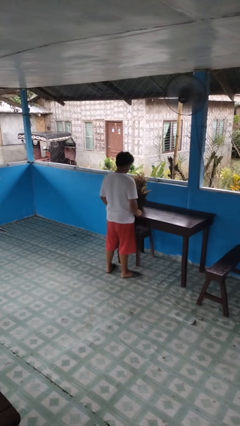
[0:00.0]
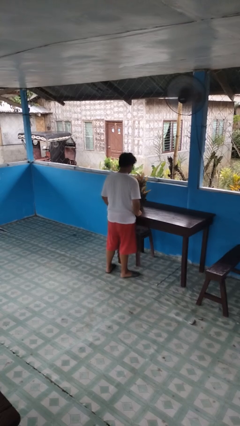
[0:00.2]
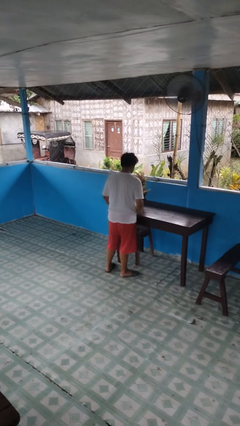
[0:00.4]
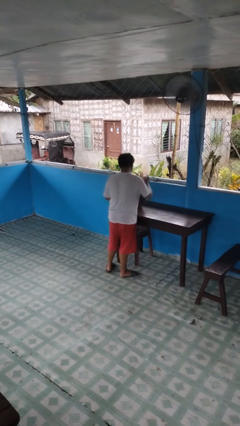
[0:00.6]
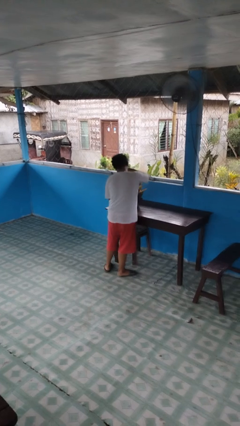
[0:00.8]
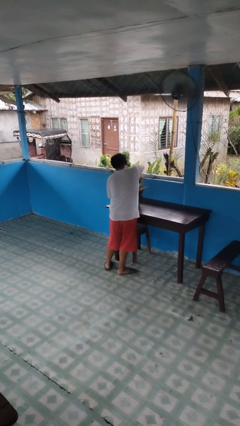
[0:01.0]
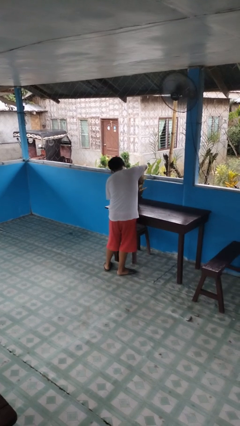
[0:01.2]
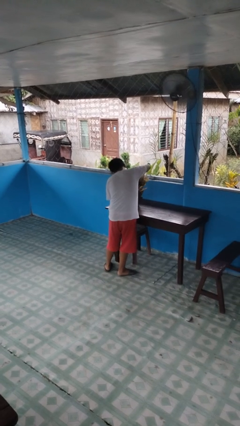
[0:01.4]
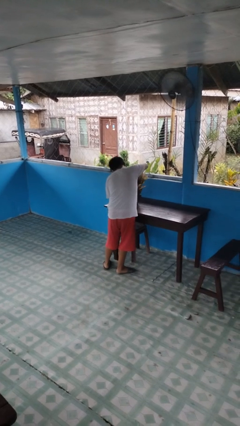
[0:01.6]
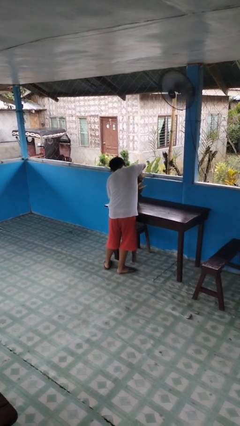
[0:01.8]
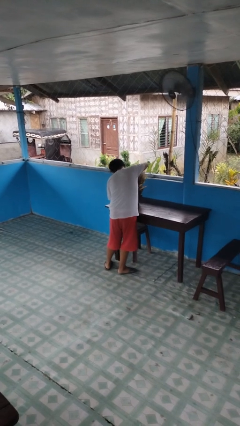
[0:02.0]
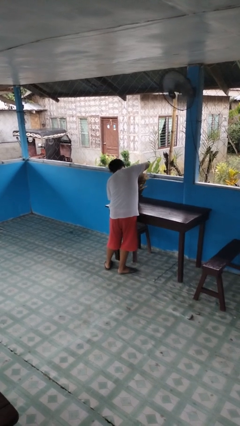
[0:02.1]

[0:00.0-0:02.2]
person arranges flowers in vase

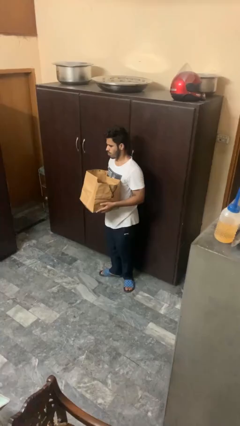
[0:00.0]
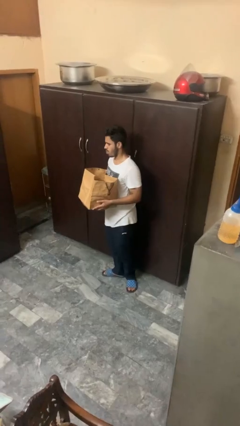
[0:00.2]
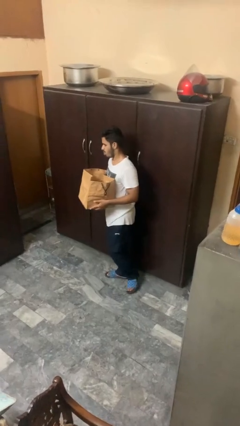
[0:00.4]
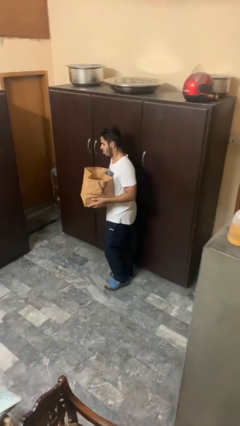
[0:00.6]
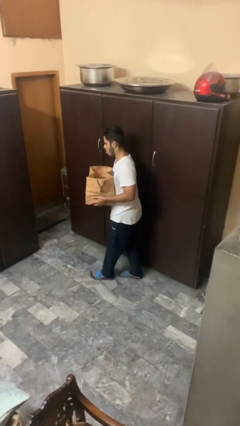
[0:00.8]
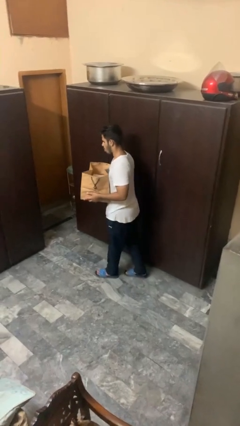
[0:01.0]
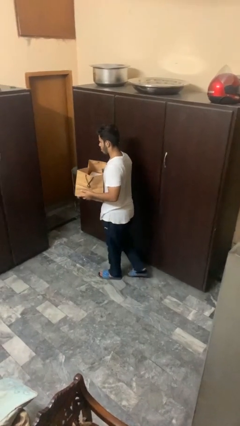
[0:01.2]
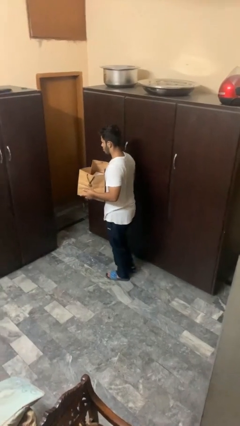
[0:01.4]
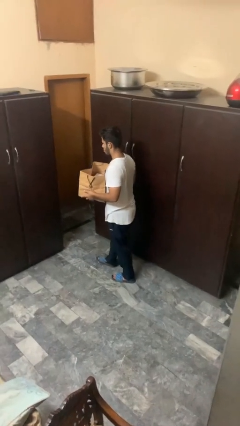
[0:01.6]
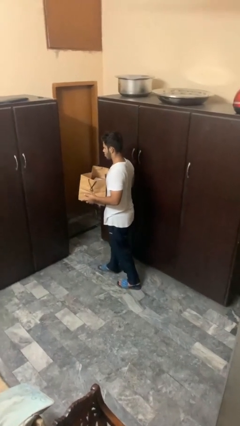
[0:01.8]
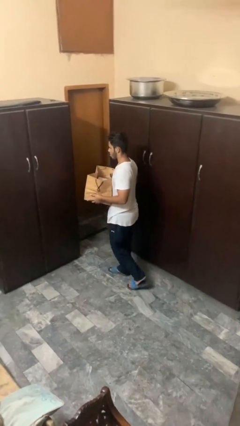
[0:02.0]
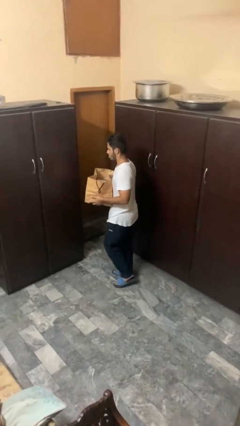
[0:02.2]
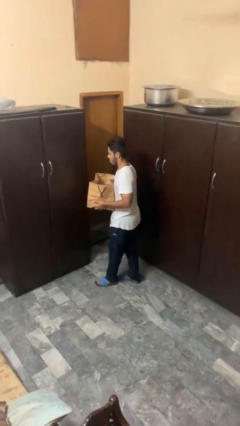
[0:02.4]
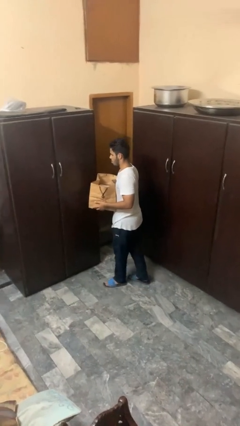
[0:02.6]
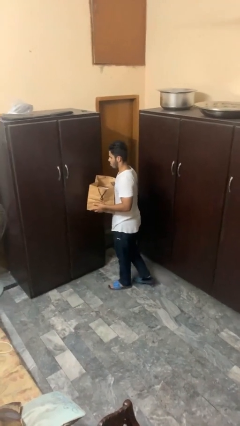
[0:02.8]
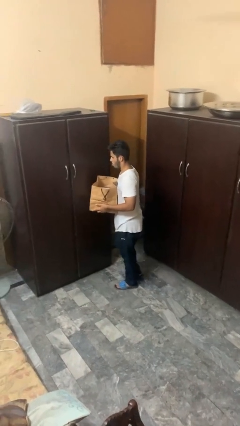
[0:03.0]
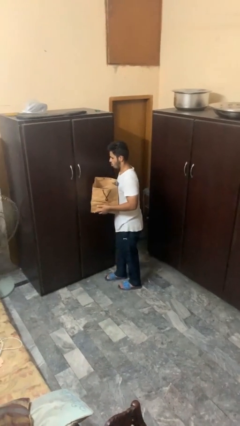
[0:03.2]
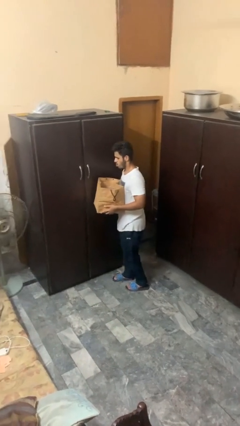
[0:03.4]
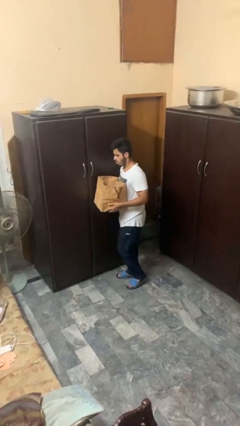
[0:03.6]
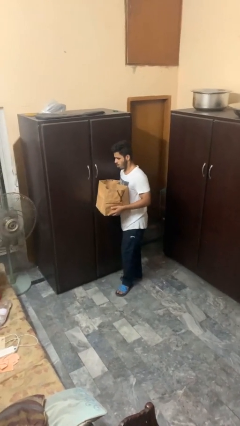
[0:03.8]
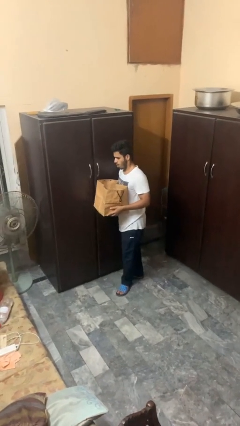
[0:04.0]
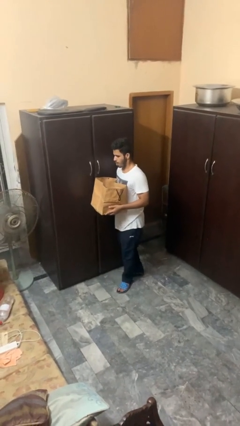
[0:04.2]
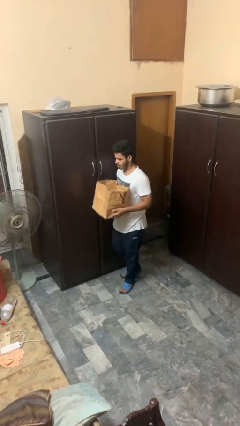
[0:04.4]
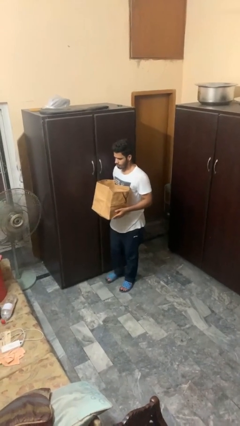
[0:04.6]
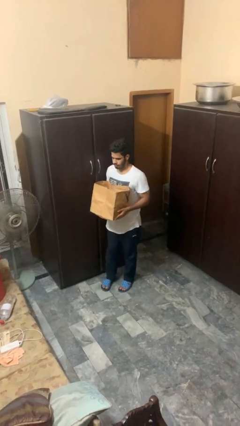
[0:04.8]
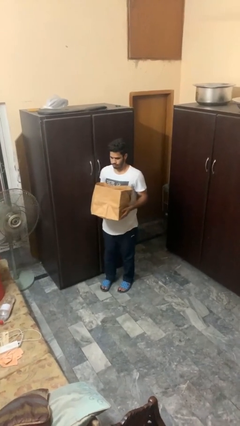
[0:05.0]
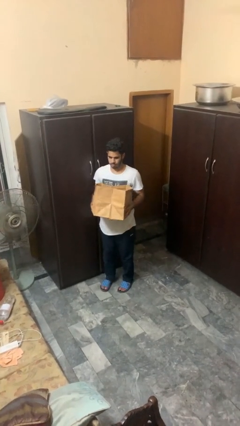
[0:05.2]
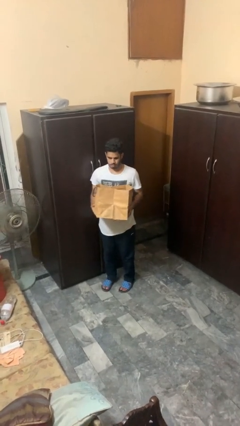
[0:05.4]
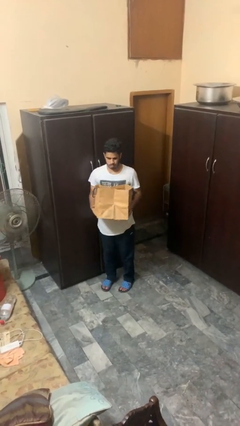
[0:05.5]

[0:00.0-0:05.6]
person carries groceries

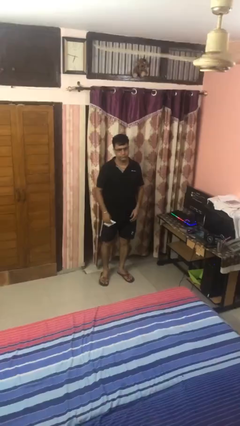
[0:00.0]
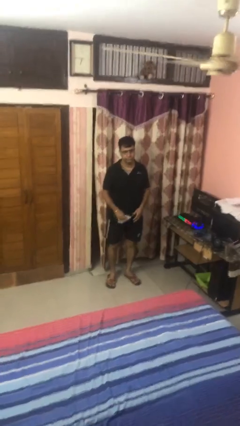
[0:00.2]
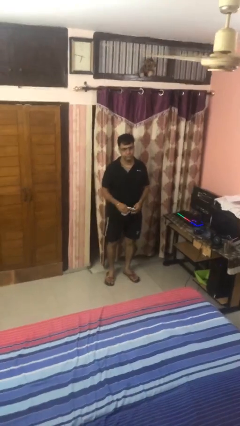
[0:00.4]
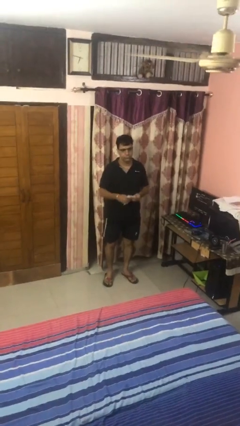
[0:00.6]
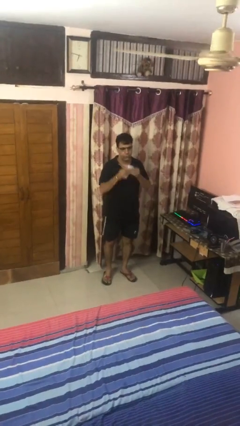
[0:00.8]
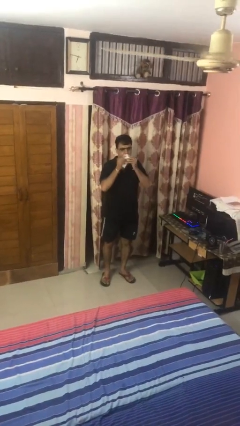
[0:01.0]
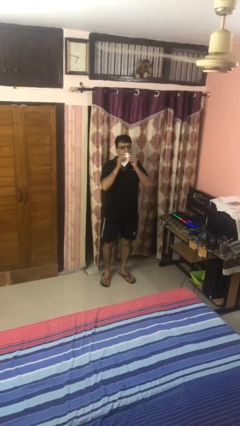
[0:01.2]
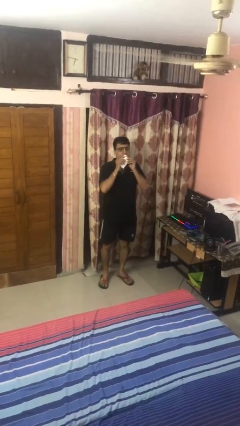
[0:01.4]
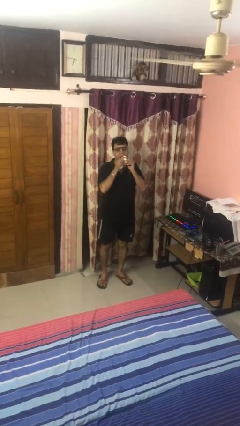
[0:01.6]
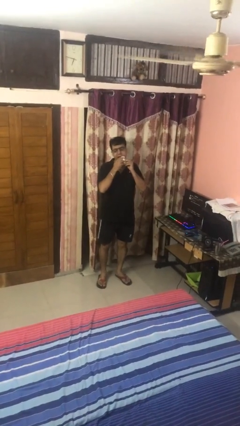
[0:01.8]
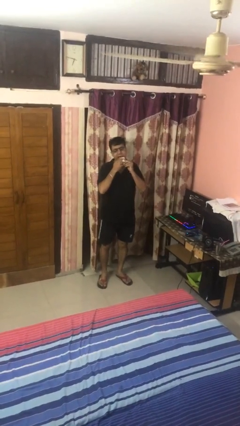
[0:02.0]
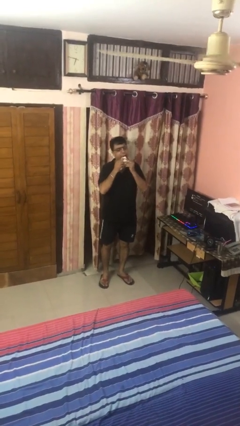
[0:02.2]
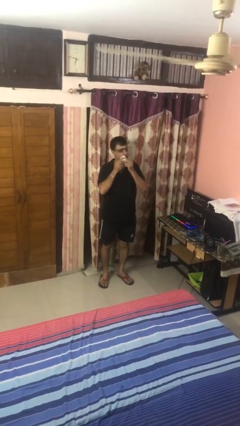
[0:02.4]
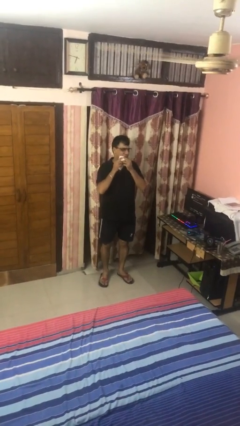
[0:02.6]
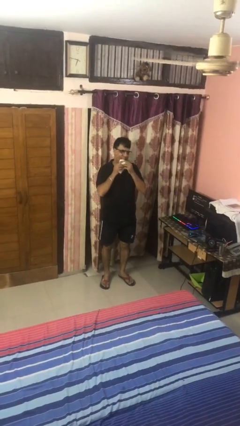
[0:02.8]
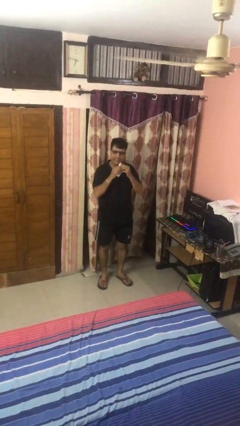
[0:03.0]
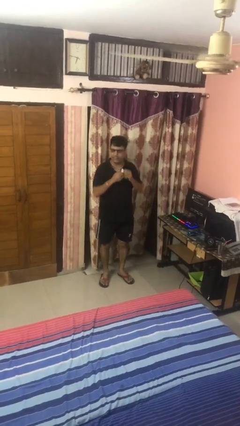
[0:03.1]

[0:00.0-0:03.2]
person wipes mouth with napkin

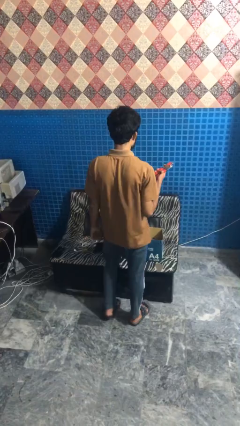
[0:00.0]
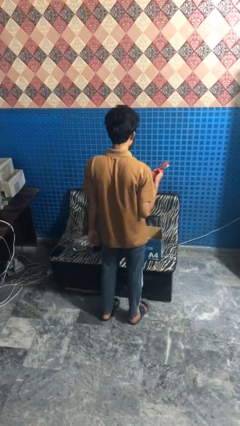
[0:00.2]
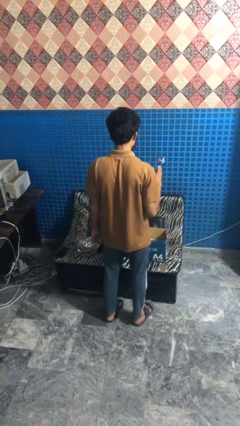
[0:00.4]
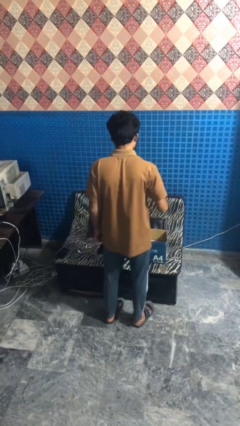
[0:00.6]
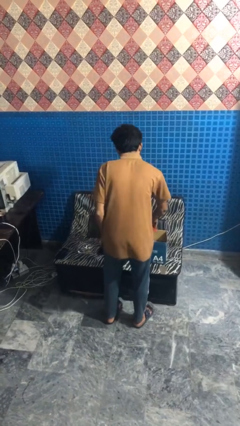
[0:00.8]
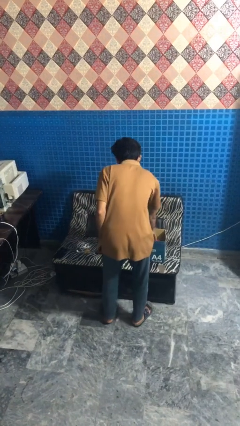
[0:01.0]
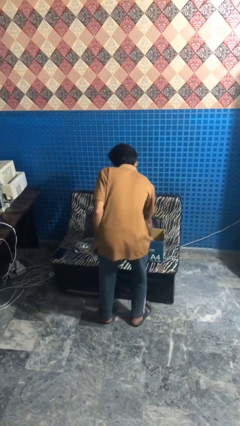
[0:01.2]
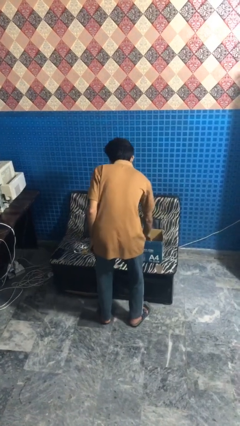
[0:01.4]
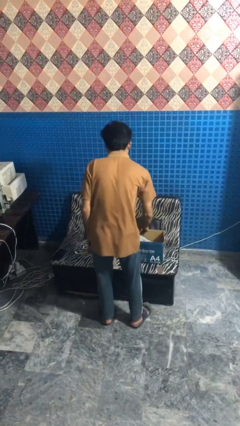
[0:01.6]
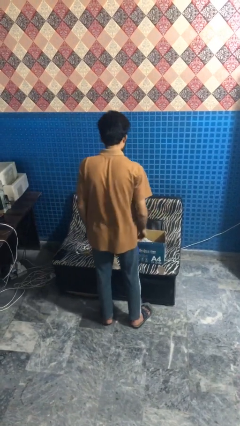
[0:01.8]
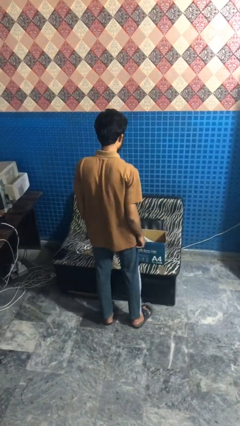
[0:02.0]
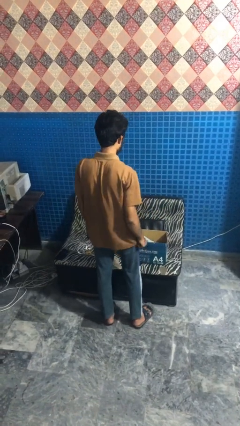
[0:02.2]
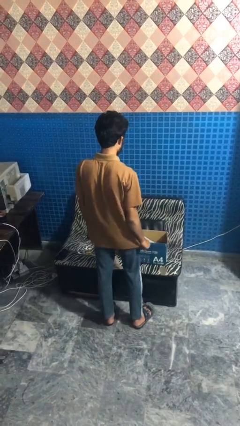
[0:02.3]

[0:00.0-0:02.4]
person puts object into box

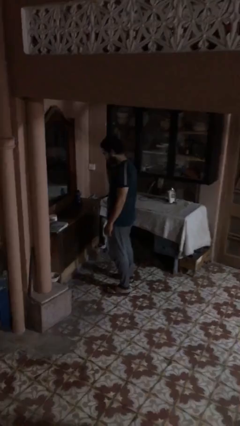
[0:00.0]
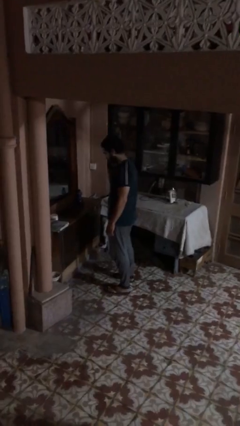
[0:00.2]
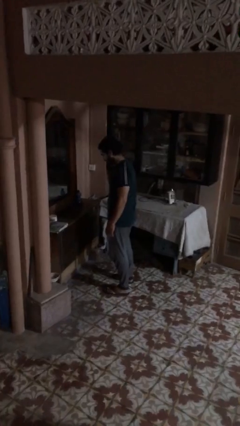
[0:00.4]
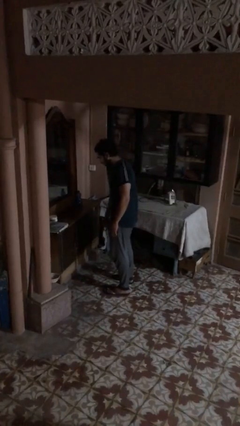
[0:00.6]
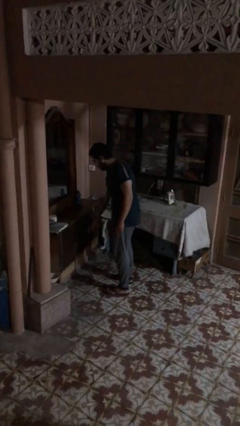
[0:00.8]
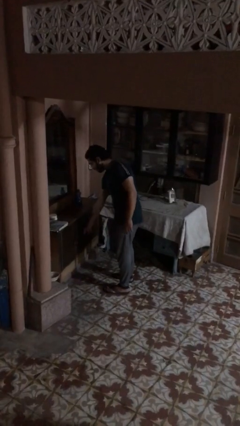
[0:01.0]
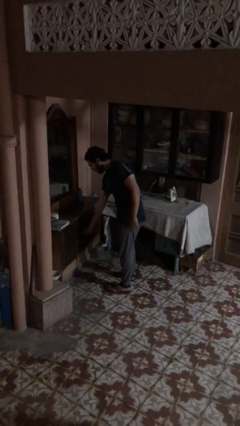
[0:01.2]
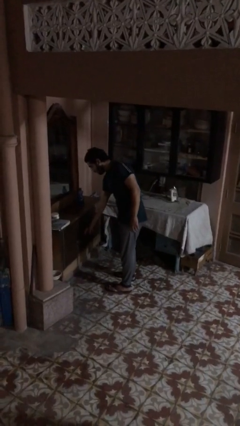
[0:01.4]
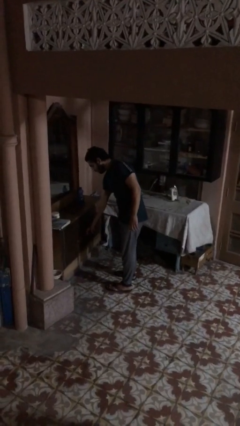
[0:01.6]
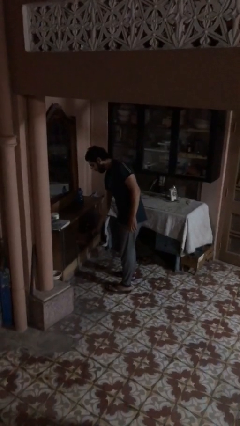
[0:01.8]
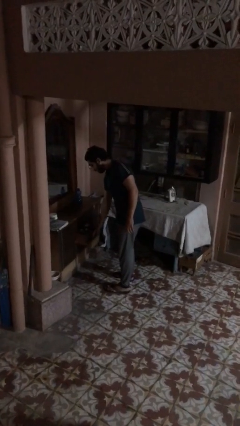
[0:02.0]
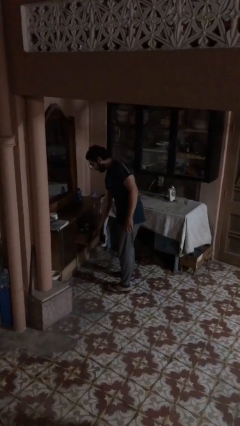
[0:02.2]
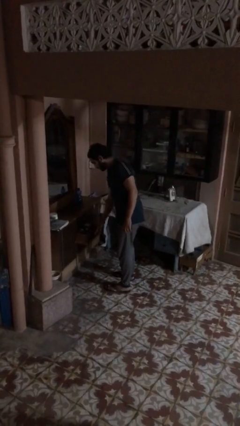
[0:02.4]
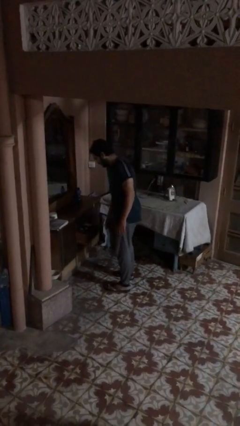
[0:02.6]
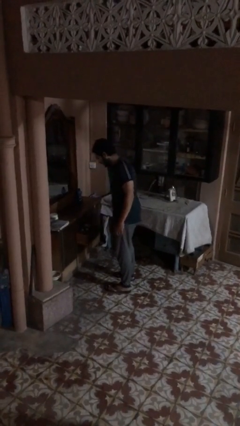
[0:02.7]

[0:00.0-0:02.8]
person opens dresser drawer

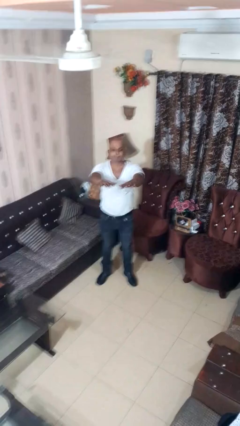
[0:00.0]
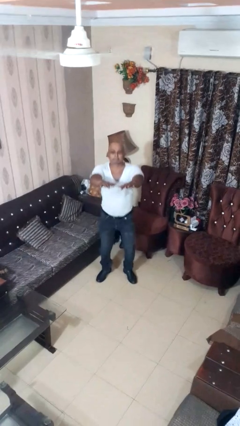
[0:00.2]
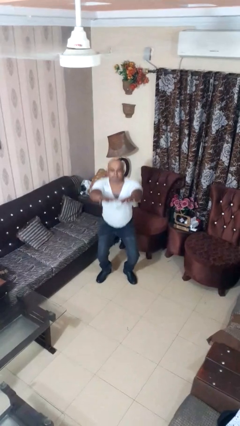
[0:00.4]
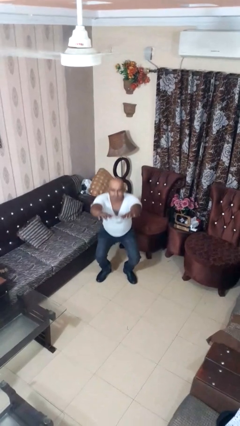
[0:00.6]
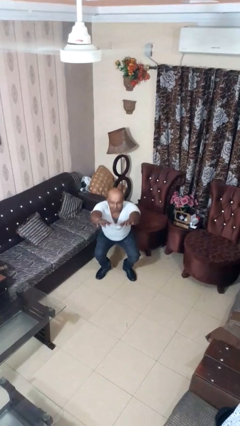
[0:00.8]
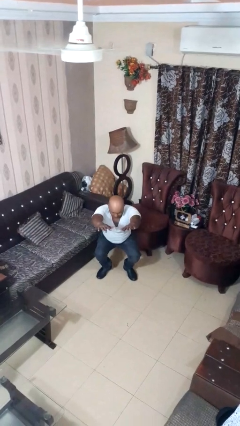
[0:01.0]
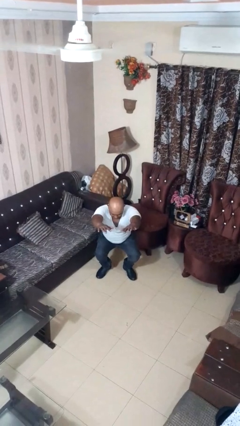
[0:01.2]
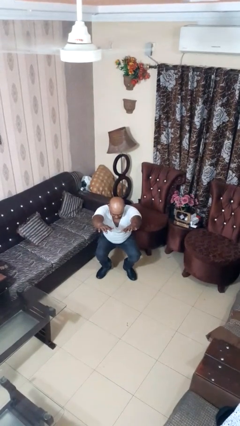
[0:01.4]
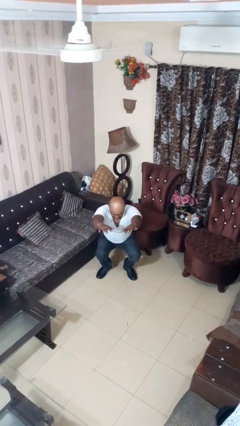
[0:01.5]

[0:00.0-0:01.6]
person squats
